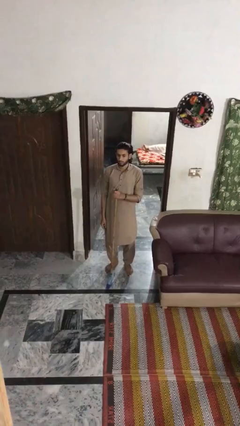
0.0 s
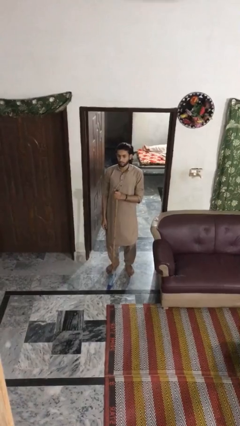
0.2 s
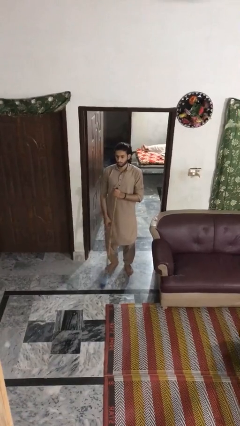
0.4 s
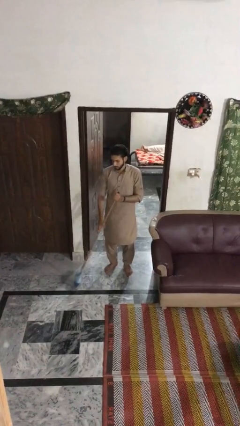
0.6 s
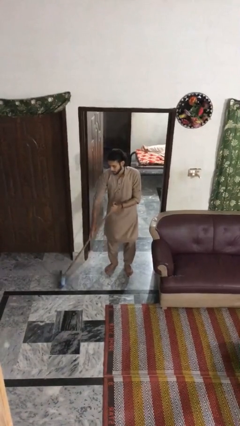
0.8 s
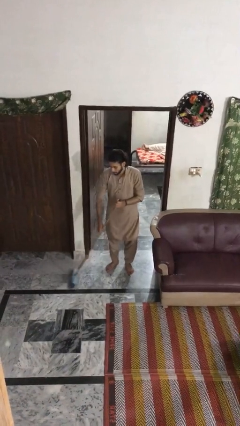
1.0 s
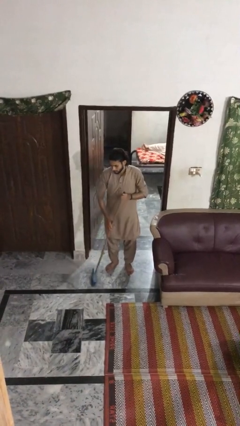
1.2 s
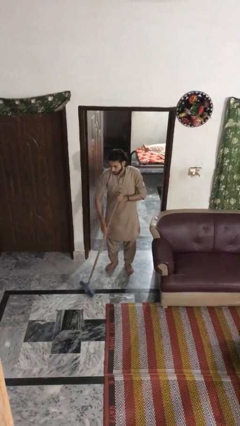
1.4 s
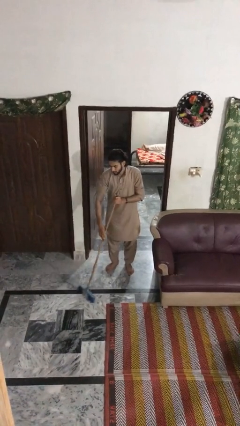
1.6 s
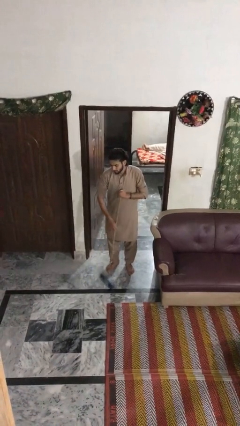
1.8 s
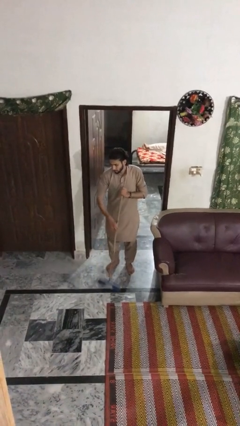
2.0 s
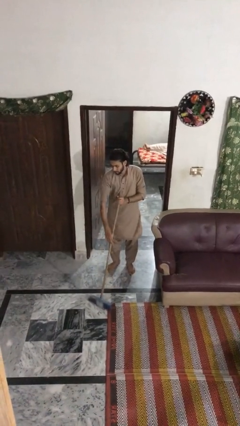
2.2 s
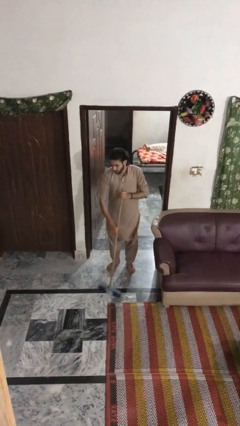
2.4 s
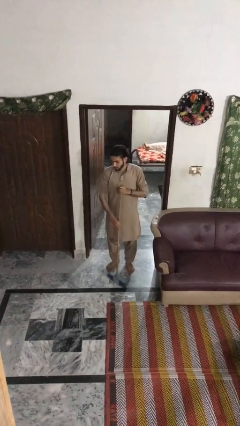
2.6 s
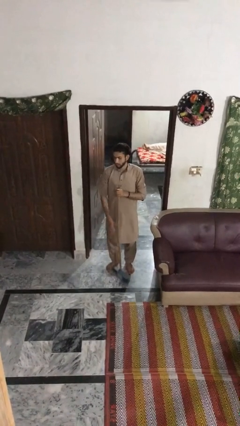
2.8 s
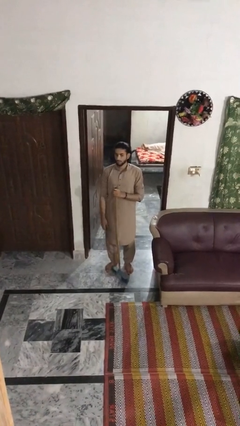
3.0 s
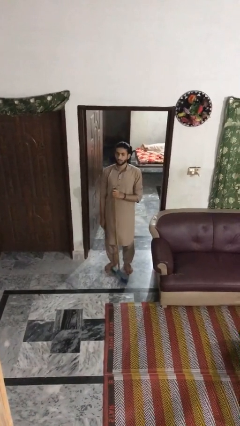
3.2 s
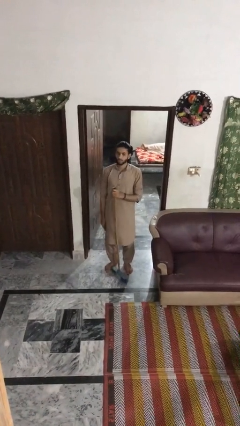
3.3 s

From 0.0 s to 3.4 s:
person sweeps floor

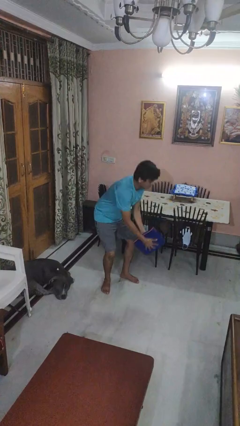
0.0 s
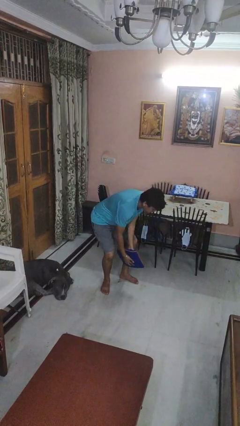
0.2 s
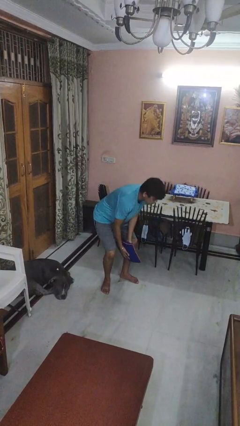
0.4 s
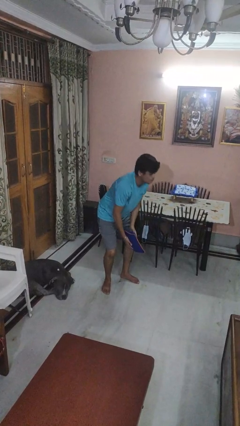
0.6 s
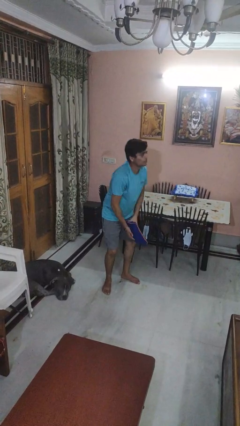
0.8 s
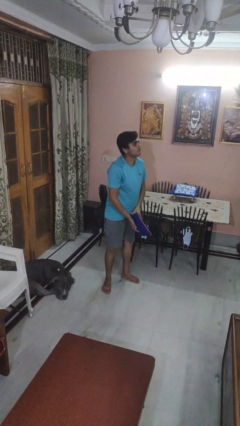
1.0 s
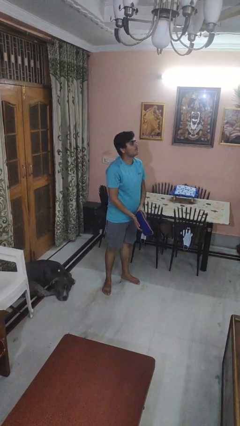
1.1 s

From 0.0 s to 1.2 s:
person catches dropped object

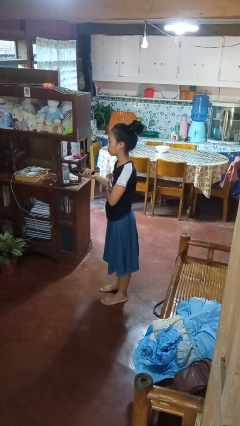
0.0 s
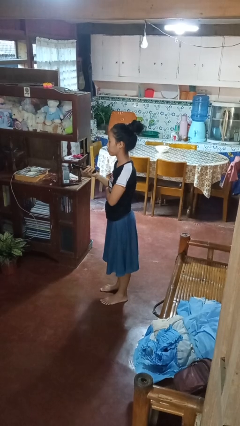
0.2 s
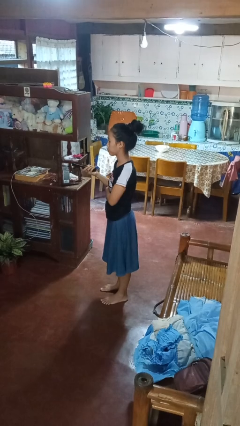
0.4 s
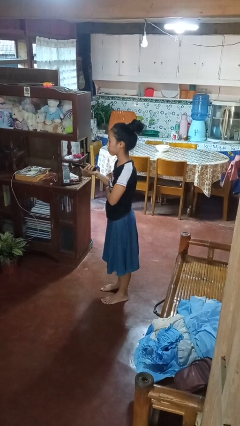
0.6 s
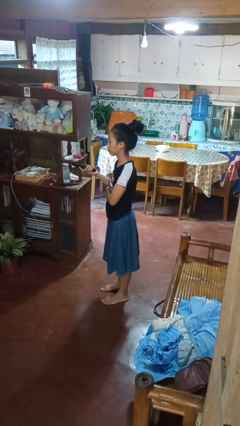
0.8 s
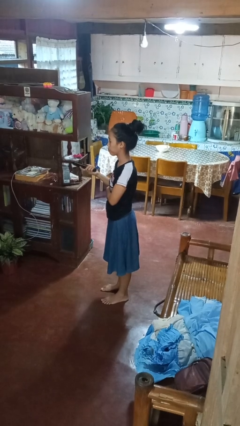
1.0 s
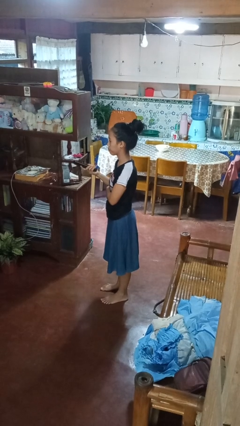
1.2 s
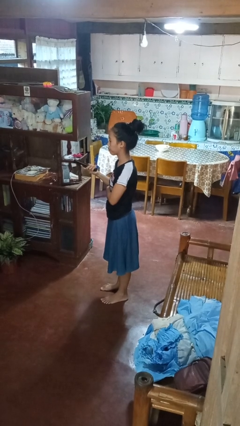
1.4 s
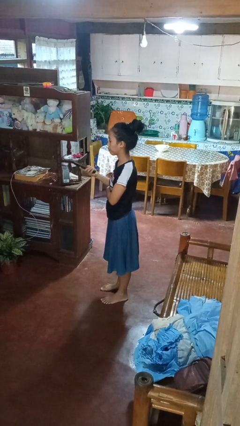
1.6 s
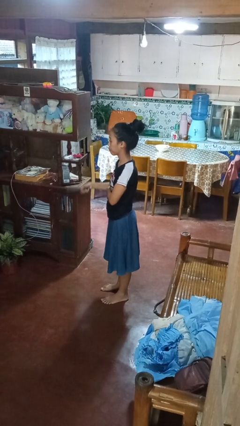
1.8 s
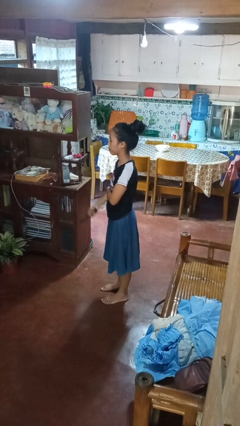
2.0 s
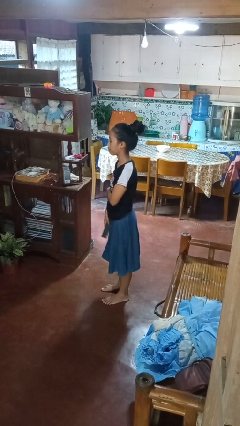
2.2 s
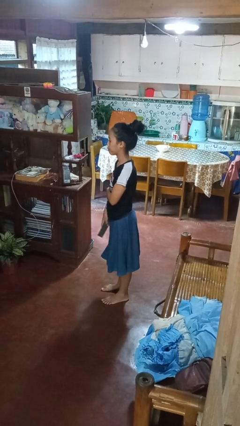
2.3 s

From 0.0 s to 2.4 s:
person uses television remote

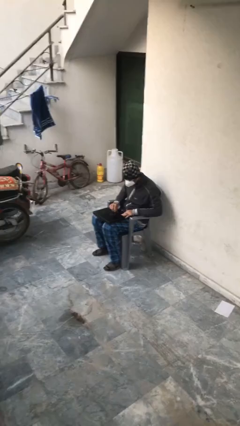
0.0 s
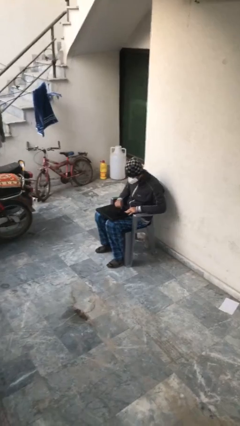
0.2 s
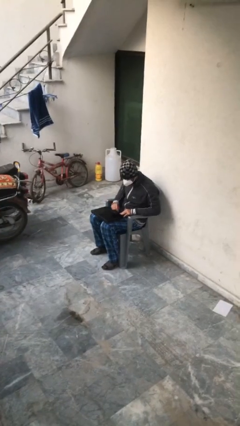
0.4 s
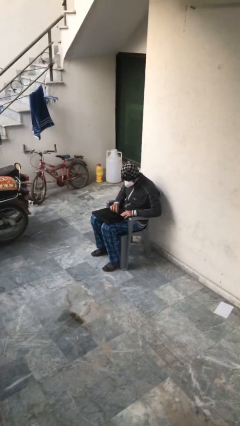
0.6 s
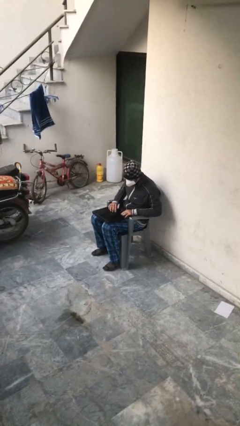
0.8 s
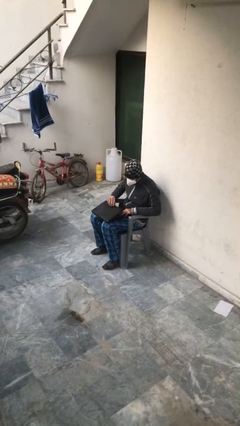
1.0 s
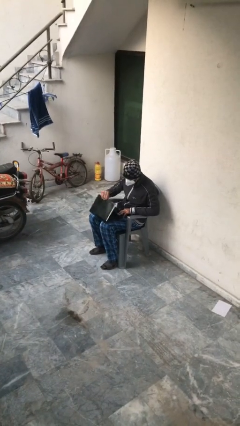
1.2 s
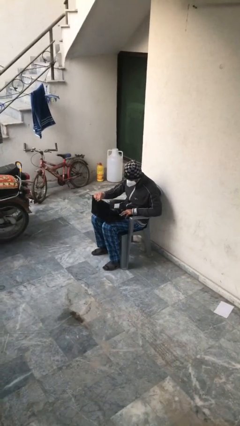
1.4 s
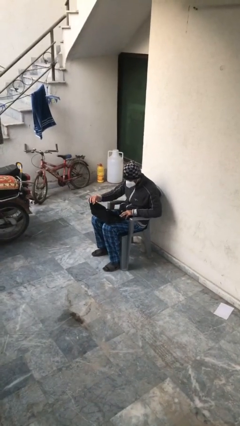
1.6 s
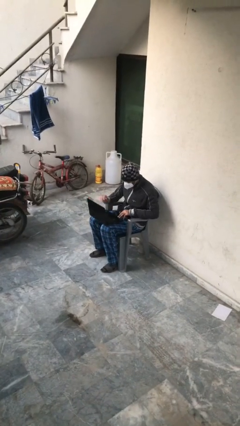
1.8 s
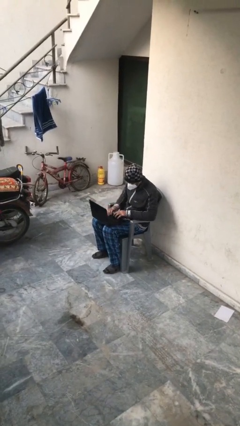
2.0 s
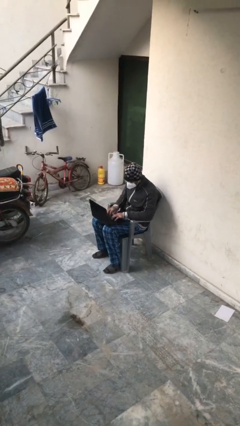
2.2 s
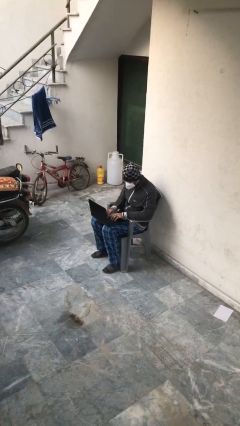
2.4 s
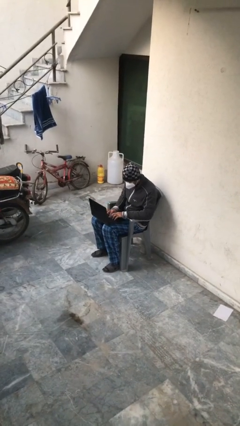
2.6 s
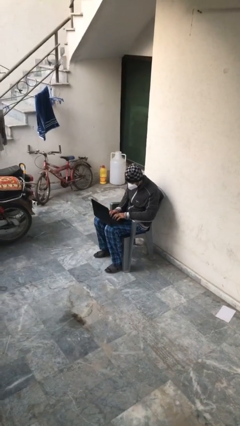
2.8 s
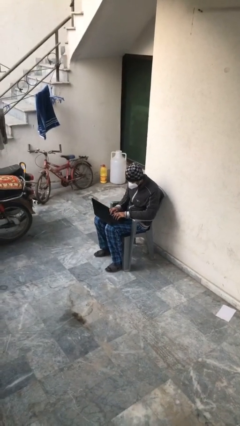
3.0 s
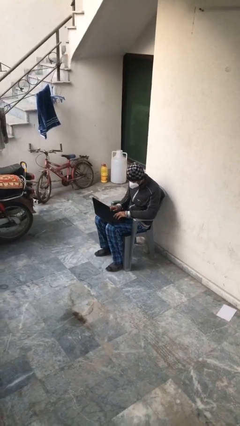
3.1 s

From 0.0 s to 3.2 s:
person interacts with laptop

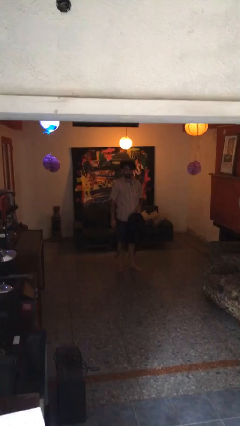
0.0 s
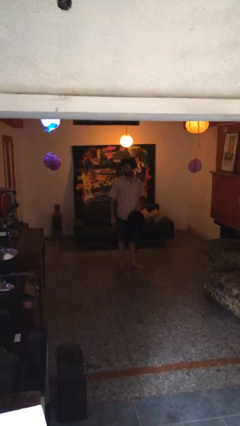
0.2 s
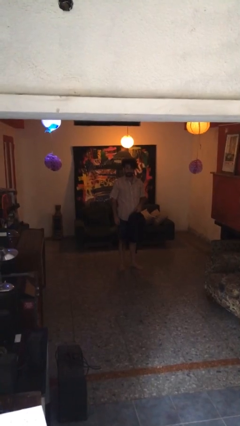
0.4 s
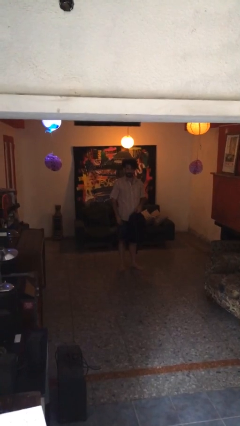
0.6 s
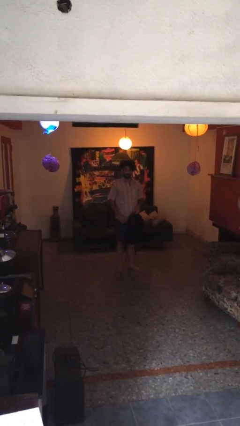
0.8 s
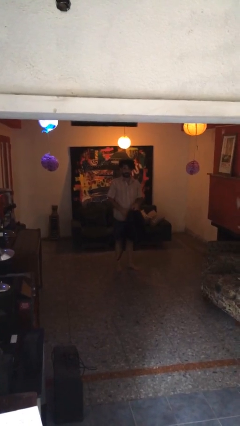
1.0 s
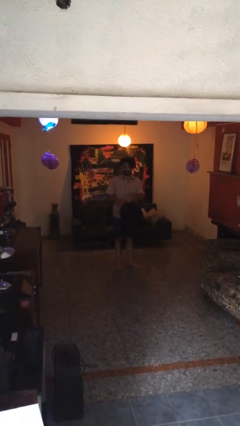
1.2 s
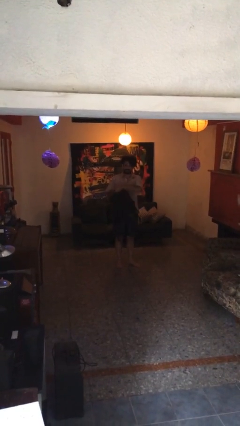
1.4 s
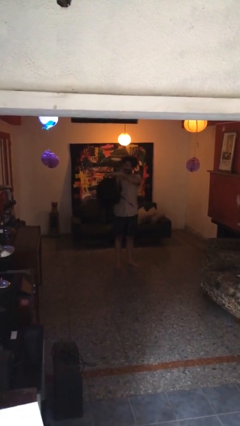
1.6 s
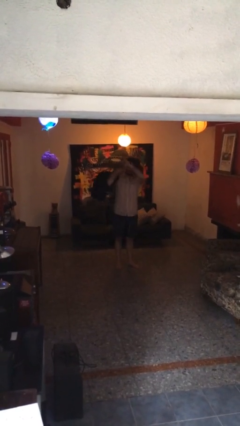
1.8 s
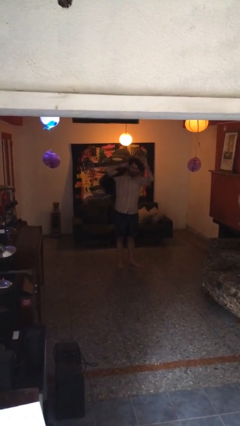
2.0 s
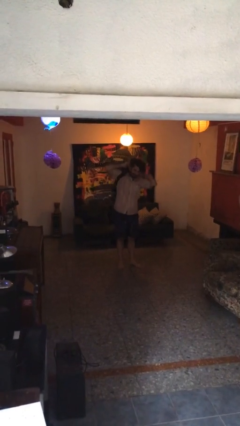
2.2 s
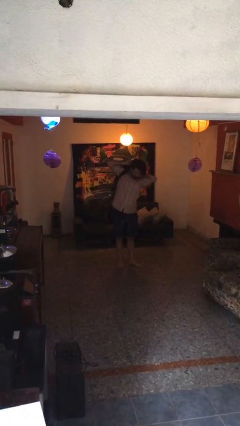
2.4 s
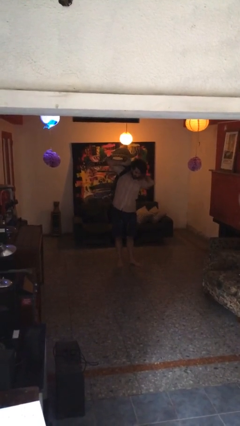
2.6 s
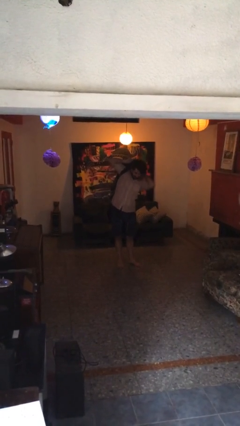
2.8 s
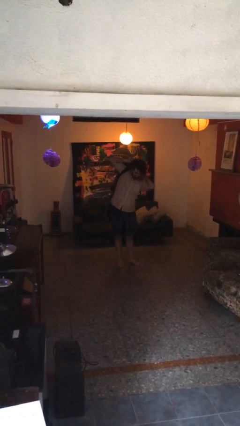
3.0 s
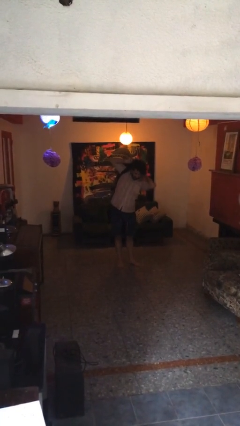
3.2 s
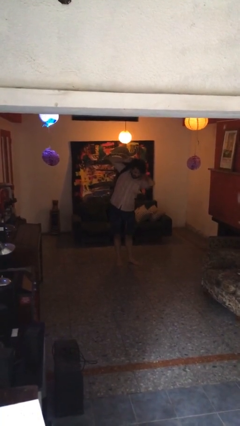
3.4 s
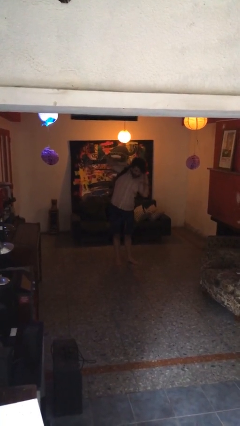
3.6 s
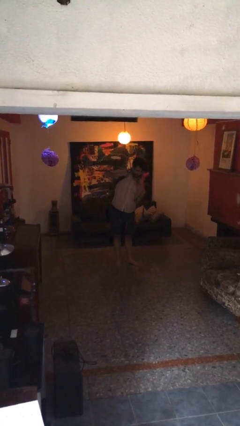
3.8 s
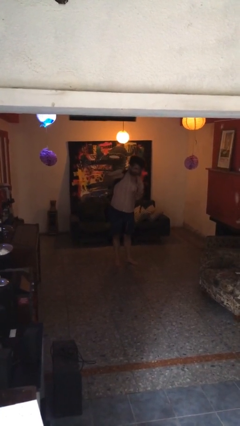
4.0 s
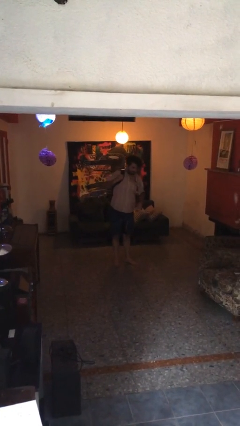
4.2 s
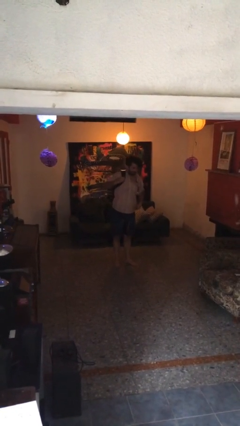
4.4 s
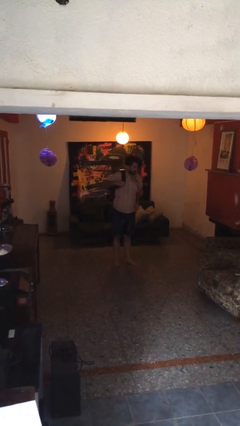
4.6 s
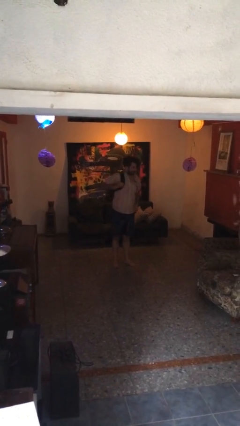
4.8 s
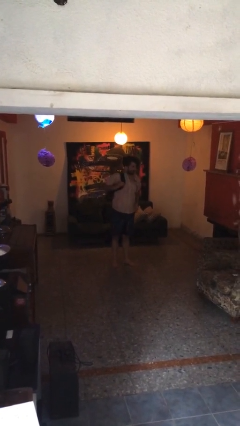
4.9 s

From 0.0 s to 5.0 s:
person puts on backpack

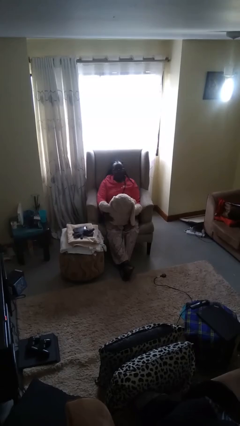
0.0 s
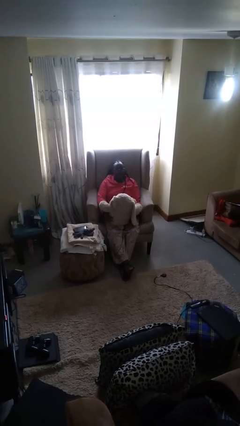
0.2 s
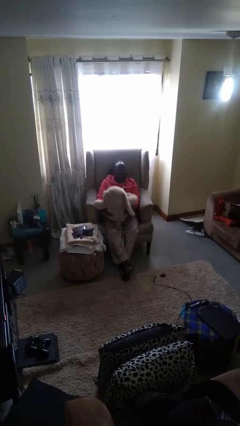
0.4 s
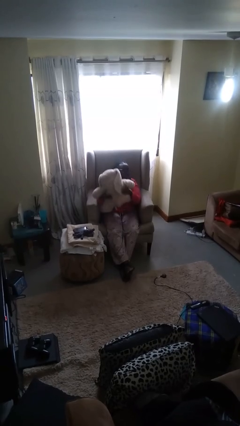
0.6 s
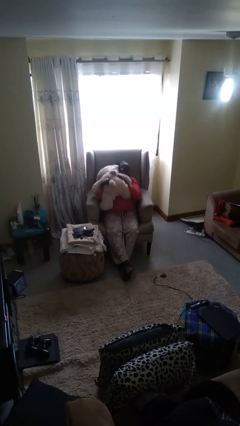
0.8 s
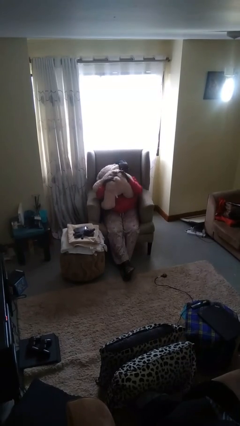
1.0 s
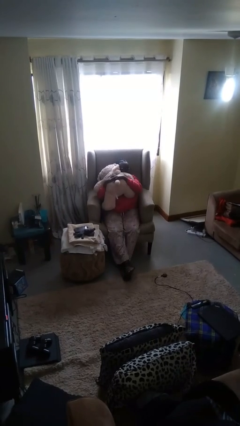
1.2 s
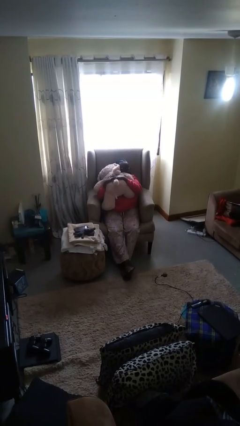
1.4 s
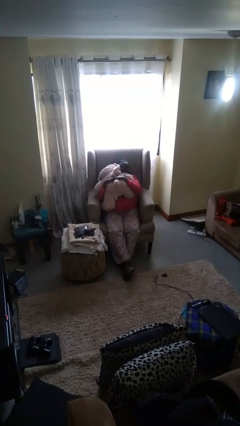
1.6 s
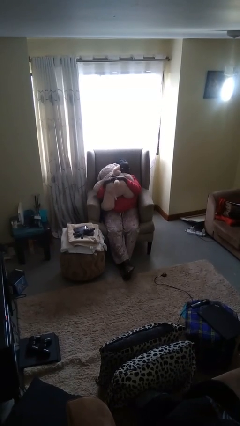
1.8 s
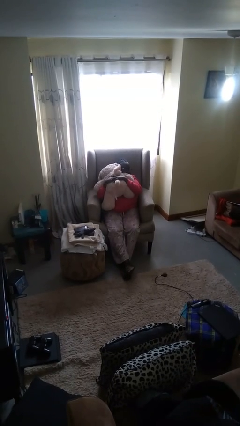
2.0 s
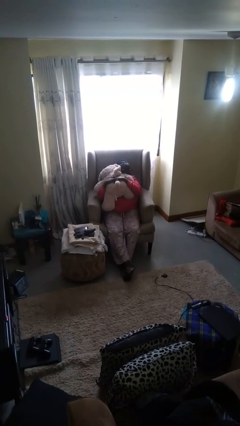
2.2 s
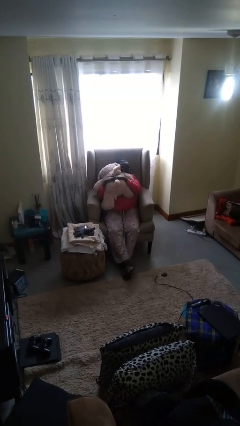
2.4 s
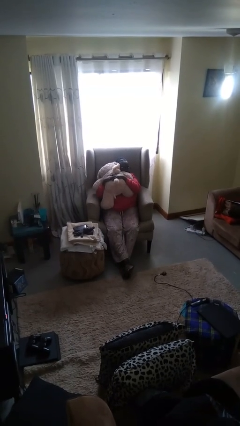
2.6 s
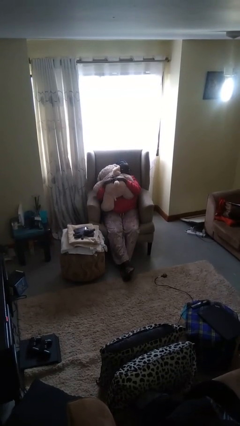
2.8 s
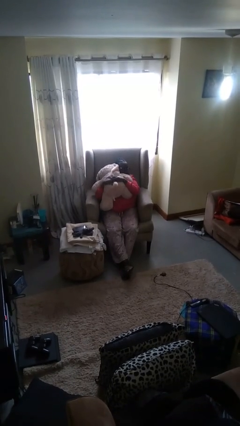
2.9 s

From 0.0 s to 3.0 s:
person hugs stuffed animal
